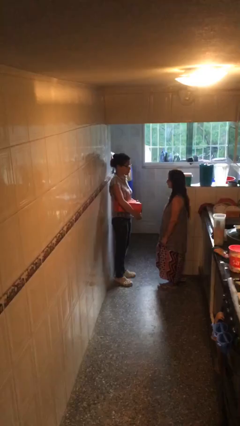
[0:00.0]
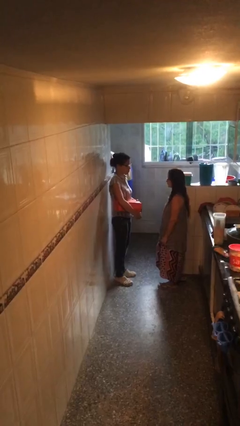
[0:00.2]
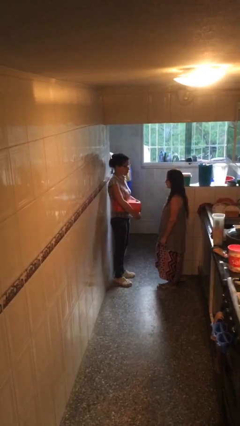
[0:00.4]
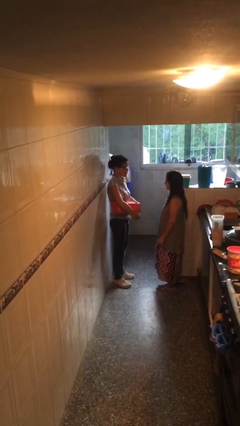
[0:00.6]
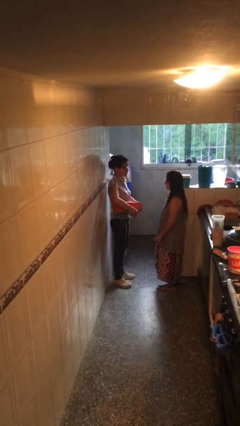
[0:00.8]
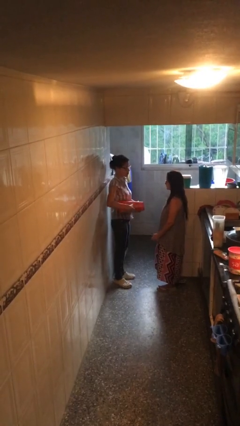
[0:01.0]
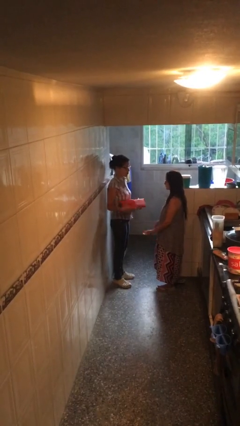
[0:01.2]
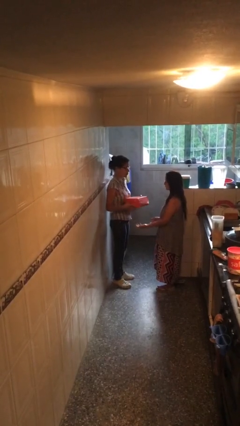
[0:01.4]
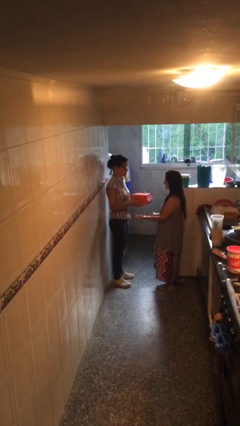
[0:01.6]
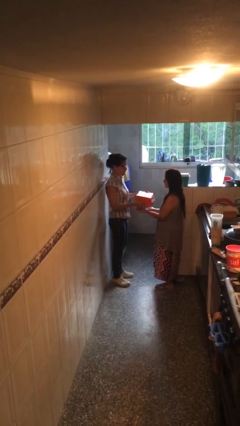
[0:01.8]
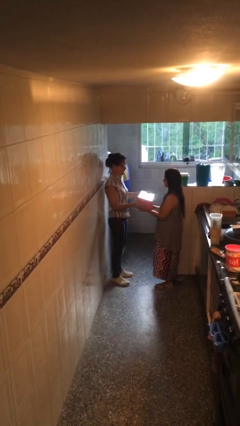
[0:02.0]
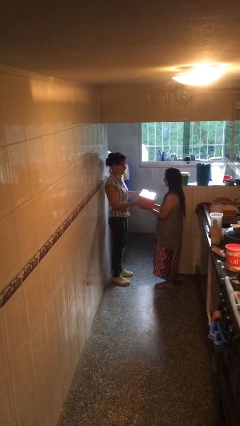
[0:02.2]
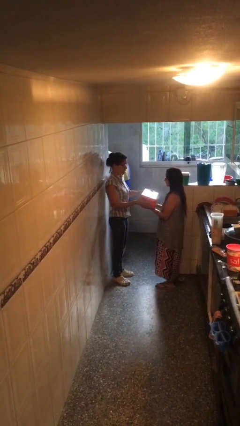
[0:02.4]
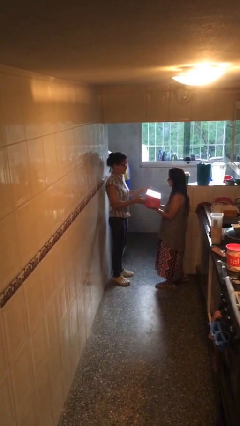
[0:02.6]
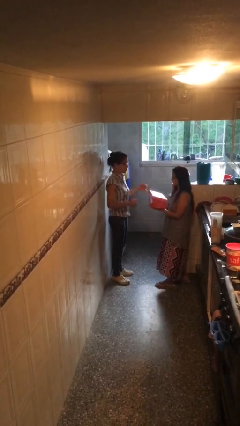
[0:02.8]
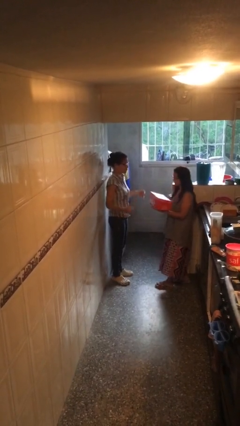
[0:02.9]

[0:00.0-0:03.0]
person transfers object to person

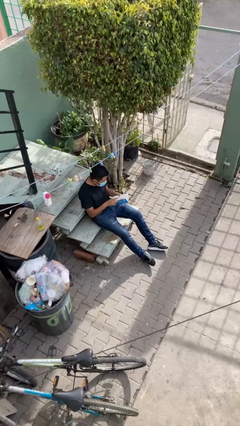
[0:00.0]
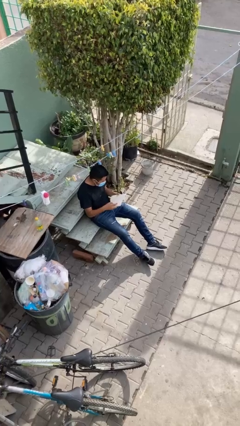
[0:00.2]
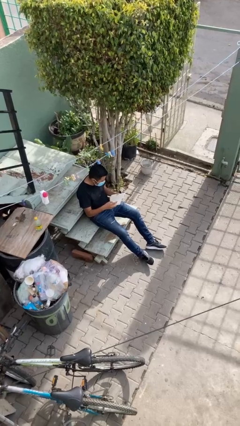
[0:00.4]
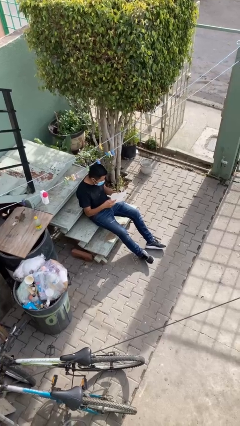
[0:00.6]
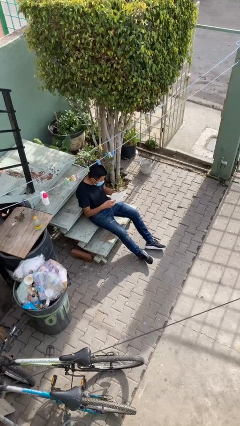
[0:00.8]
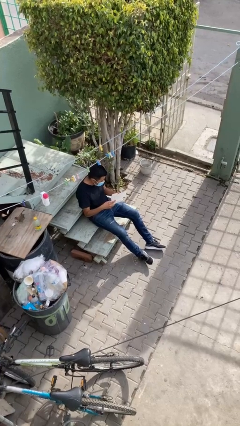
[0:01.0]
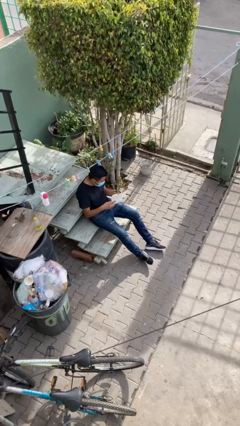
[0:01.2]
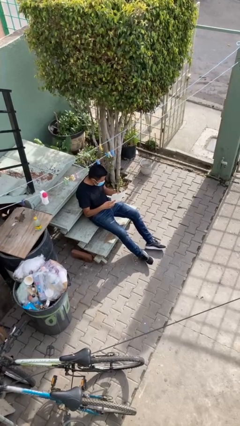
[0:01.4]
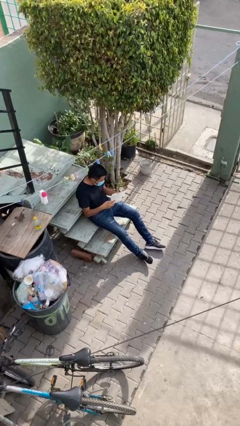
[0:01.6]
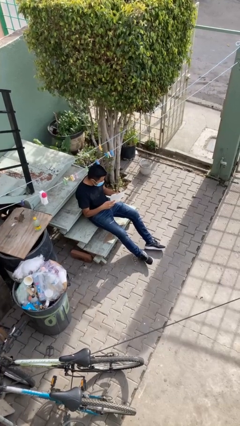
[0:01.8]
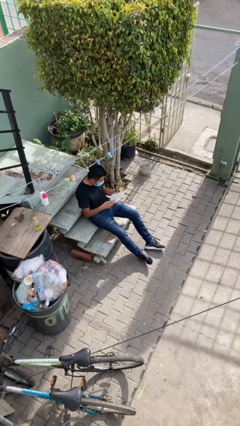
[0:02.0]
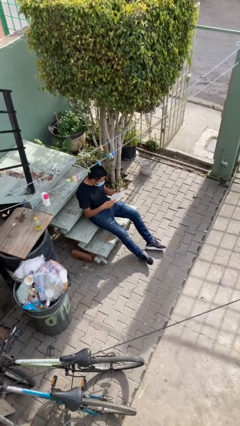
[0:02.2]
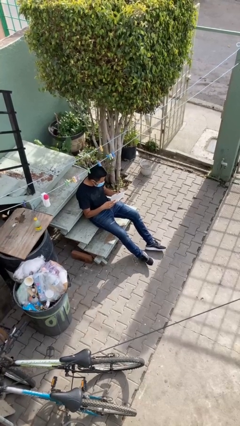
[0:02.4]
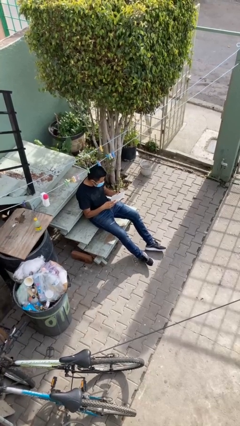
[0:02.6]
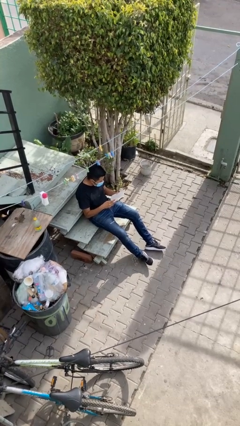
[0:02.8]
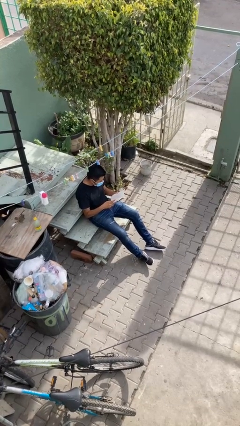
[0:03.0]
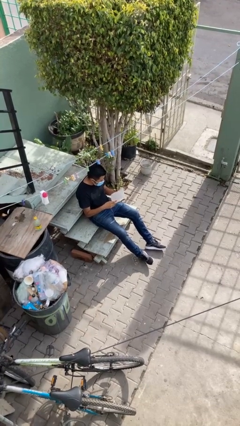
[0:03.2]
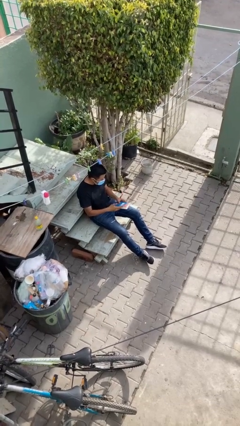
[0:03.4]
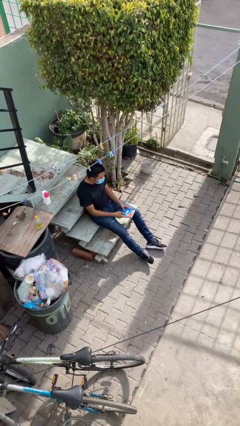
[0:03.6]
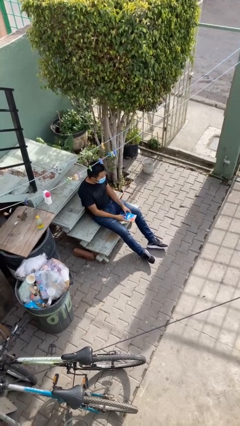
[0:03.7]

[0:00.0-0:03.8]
person reads document

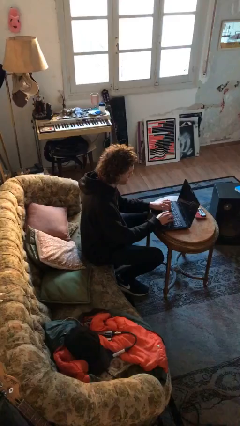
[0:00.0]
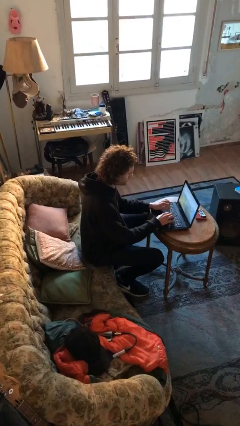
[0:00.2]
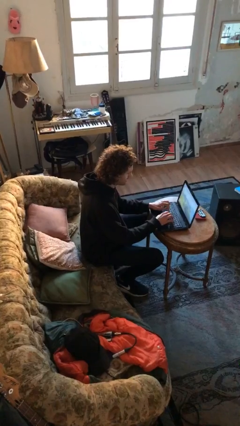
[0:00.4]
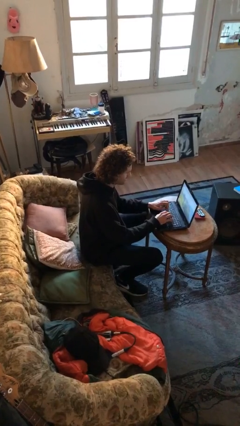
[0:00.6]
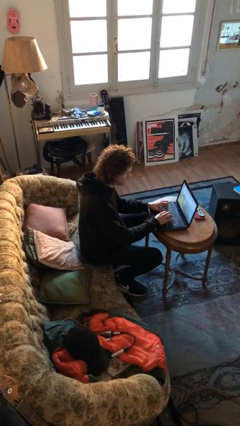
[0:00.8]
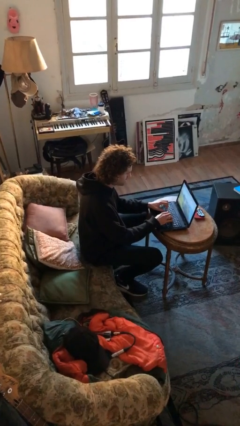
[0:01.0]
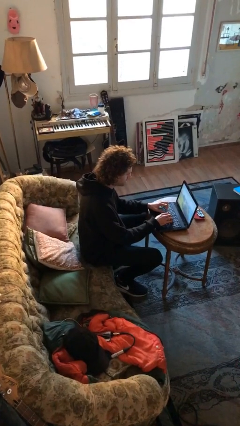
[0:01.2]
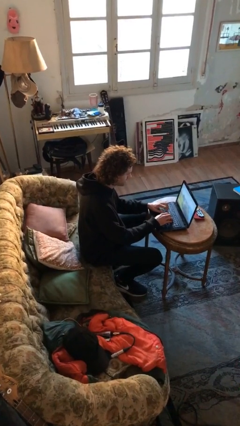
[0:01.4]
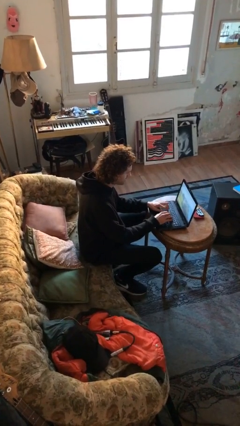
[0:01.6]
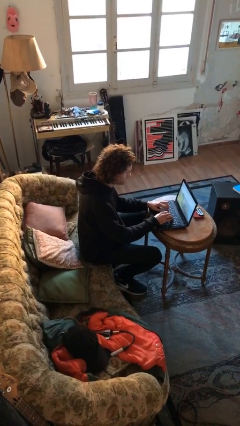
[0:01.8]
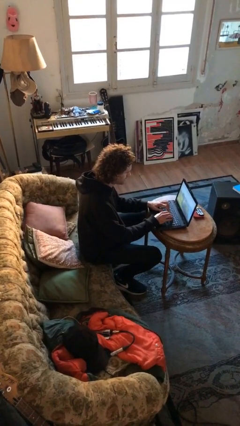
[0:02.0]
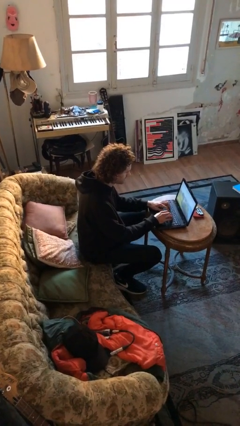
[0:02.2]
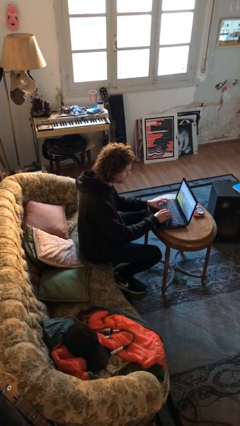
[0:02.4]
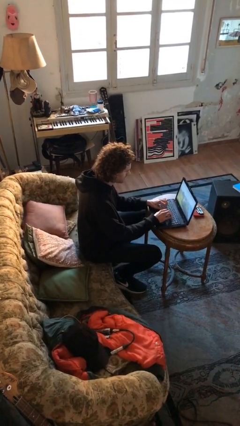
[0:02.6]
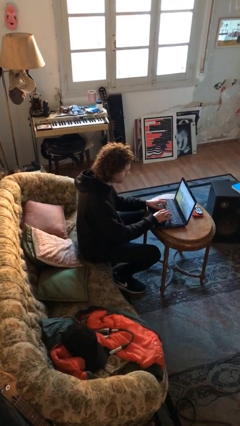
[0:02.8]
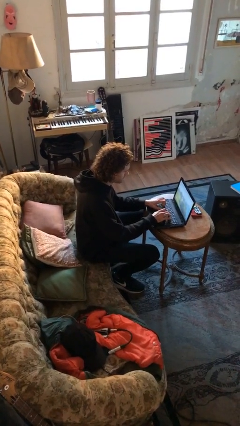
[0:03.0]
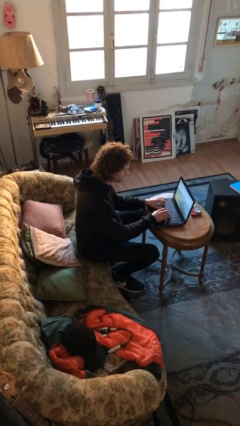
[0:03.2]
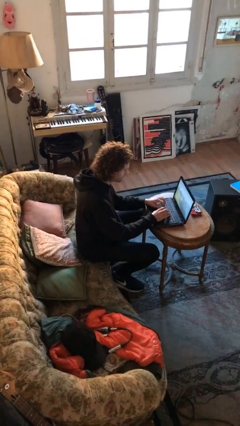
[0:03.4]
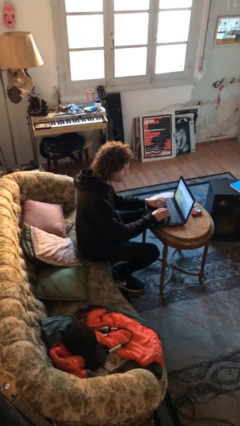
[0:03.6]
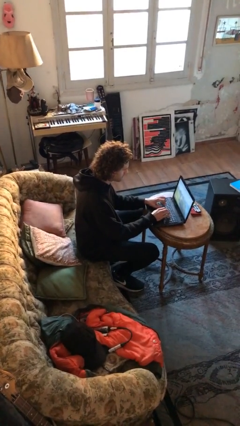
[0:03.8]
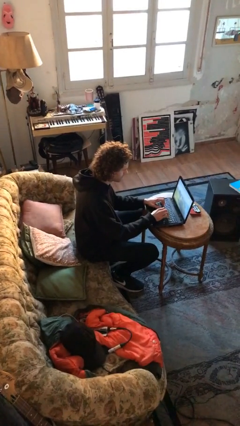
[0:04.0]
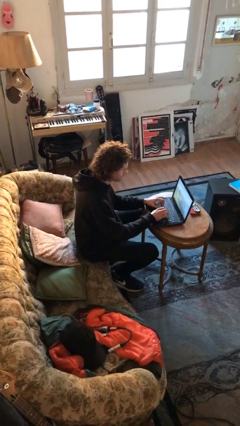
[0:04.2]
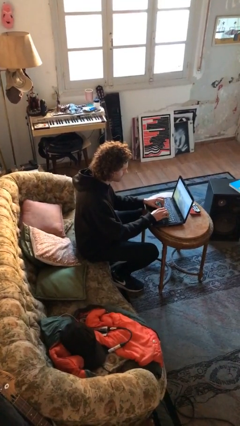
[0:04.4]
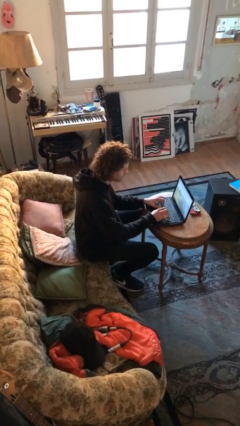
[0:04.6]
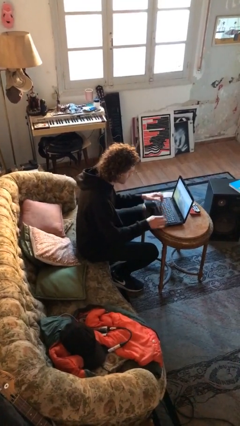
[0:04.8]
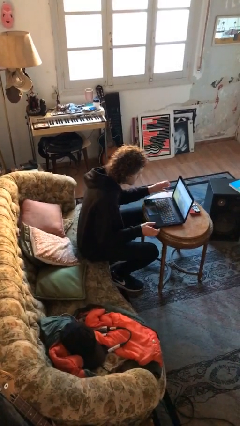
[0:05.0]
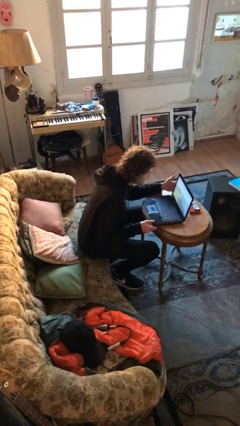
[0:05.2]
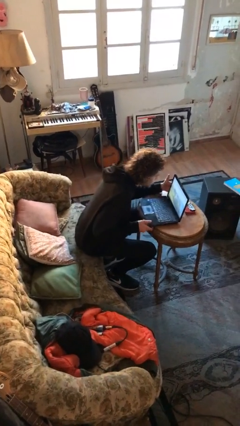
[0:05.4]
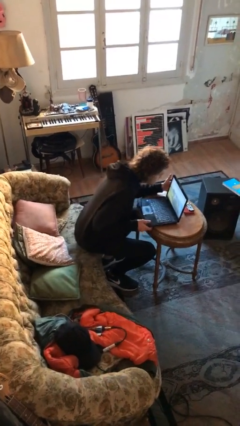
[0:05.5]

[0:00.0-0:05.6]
person interacts with laptop

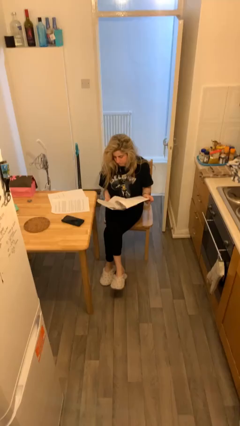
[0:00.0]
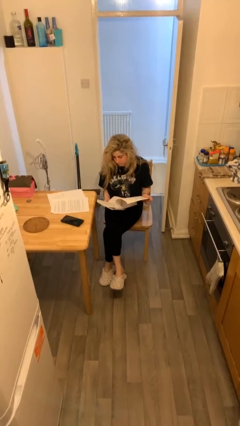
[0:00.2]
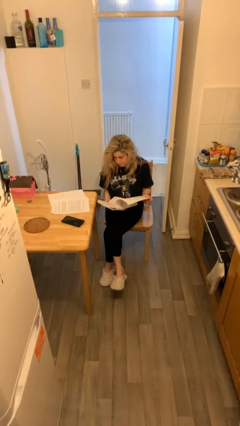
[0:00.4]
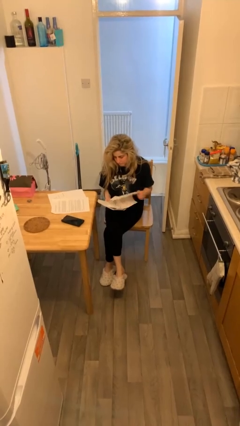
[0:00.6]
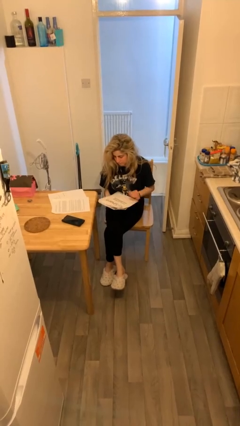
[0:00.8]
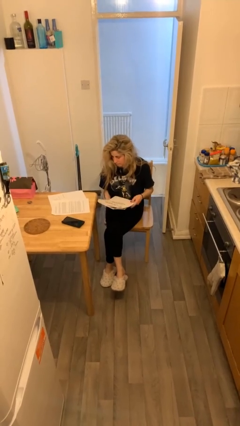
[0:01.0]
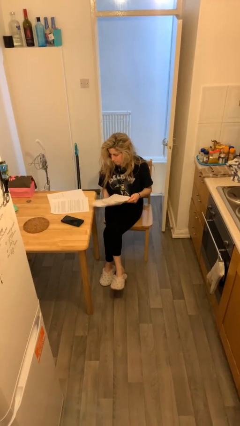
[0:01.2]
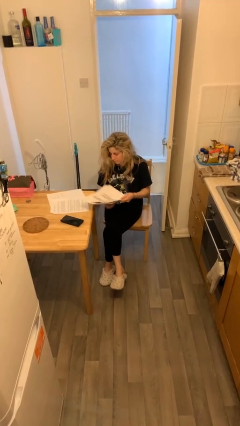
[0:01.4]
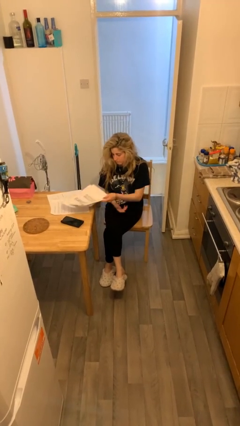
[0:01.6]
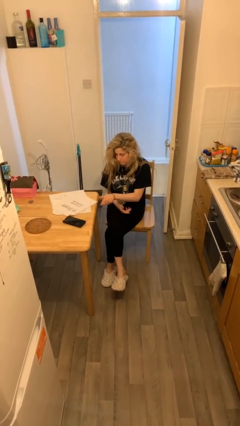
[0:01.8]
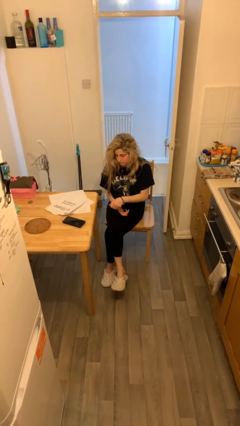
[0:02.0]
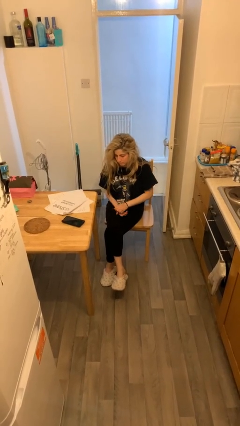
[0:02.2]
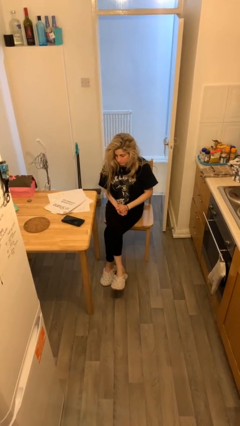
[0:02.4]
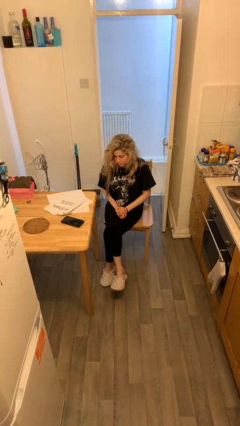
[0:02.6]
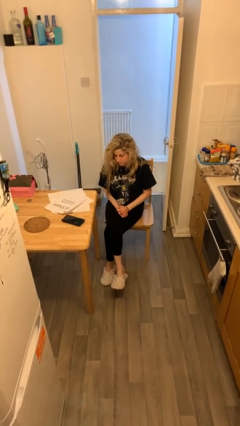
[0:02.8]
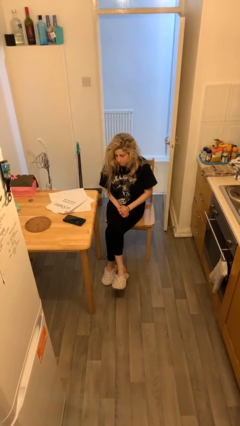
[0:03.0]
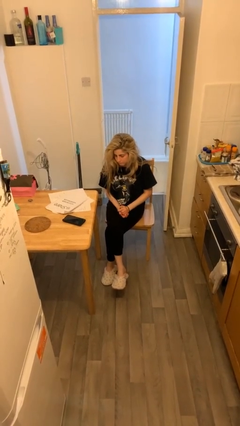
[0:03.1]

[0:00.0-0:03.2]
person puts down object on table

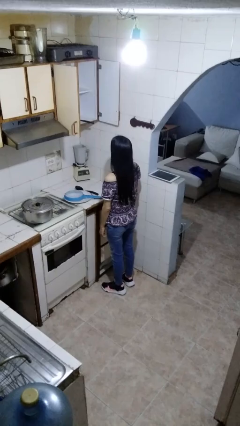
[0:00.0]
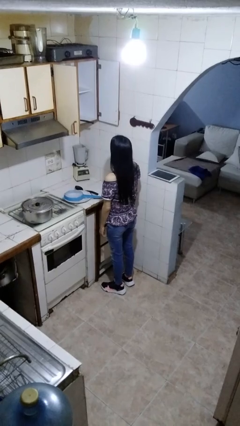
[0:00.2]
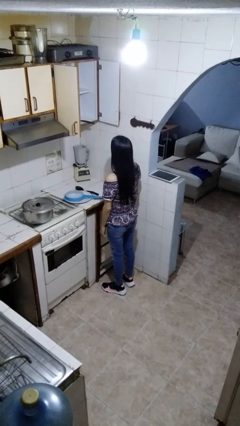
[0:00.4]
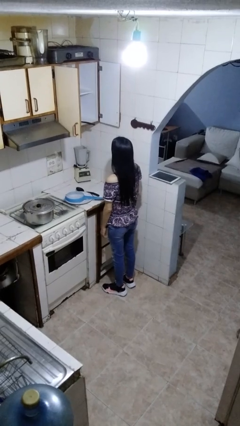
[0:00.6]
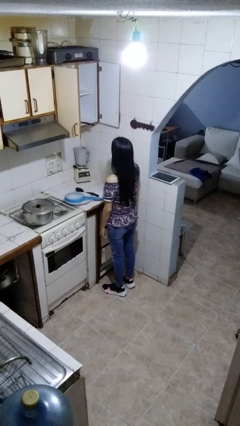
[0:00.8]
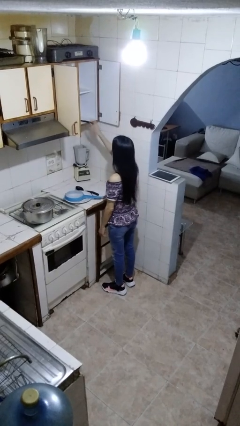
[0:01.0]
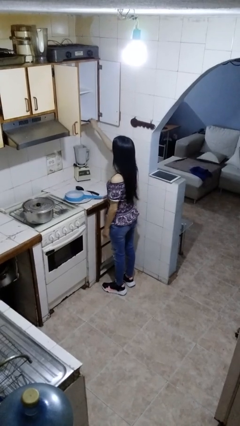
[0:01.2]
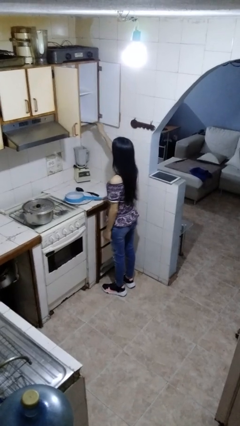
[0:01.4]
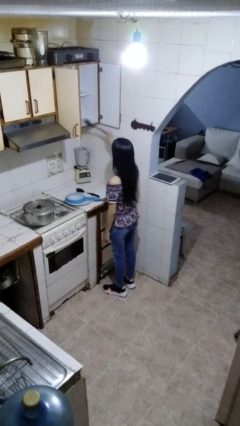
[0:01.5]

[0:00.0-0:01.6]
person takes object from cabinet

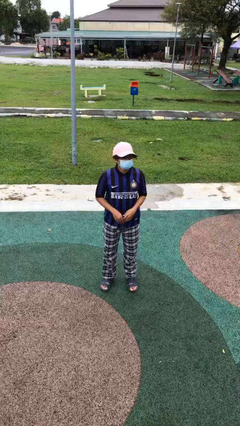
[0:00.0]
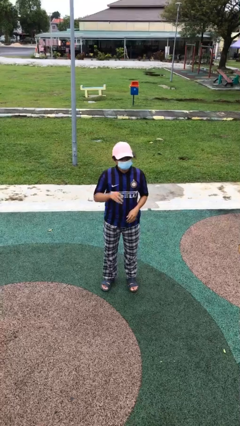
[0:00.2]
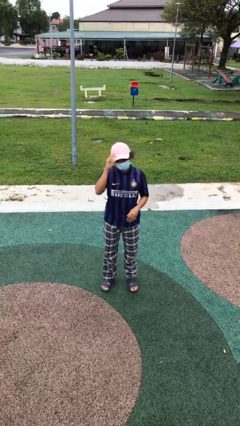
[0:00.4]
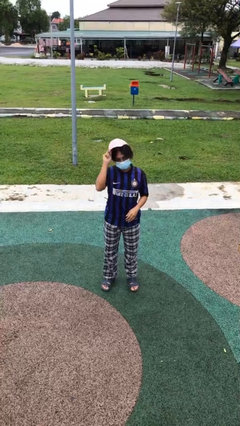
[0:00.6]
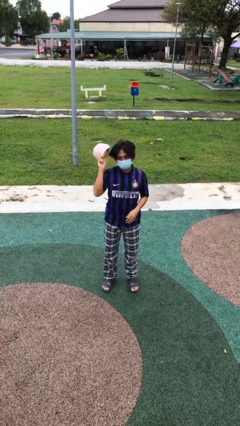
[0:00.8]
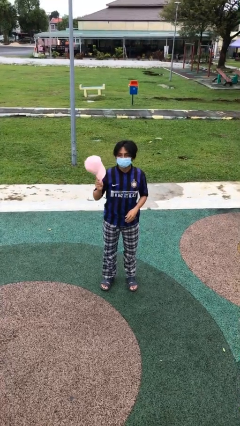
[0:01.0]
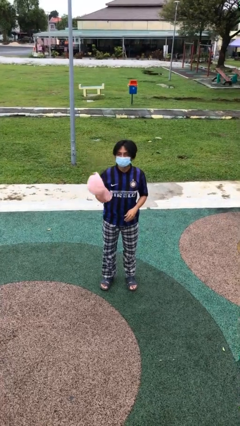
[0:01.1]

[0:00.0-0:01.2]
person takes off hat
